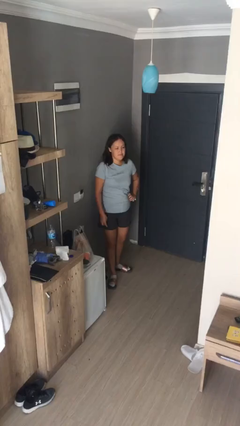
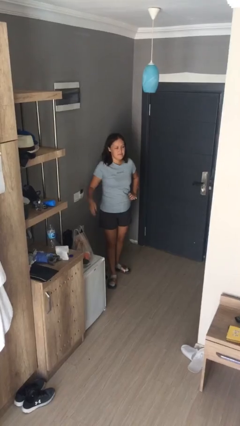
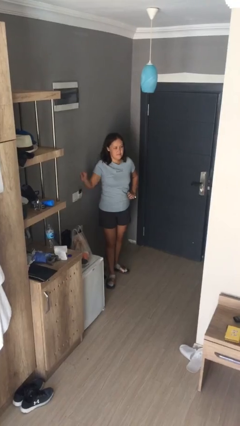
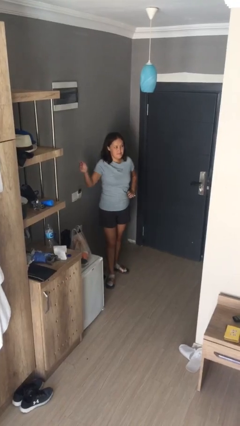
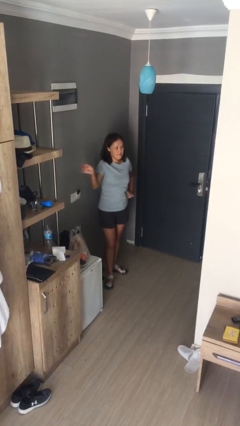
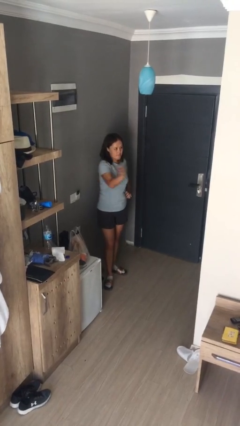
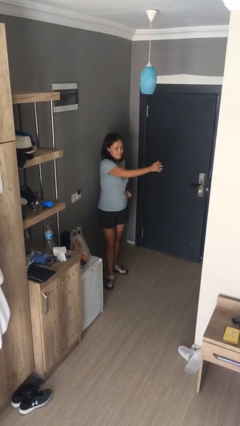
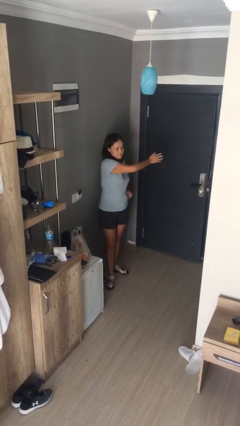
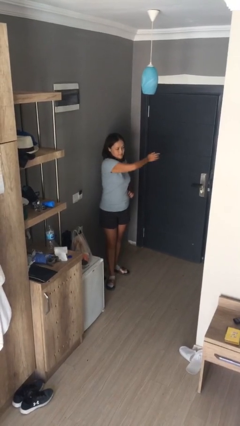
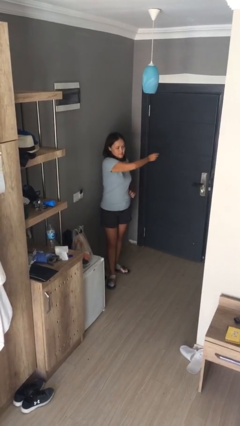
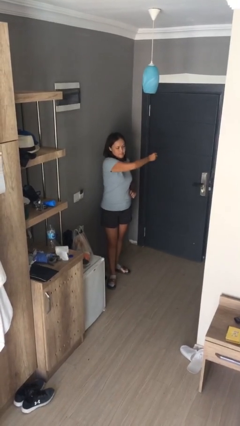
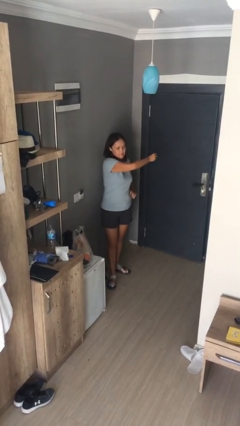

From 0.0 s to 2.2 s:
person gestures swipe left

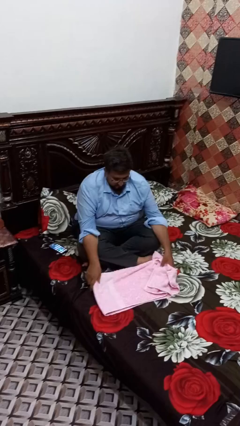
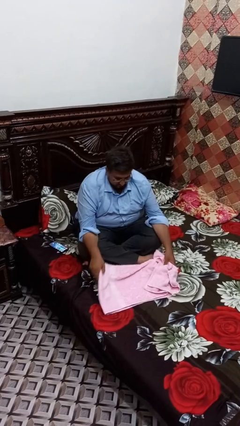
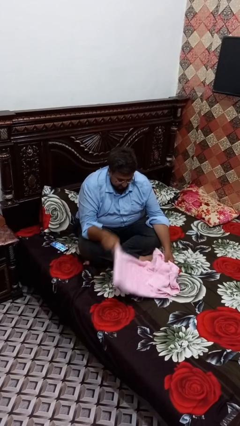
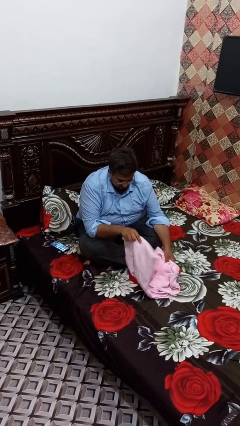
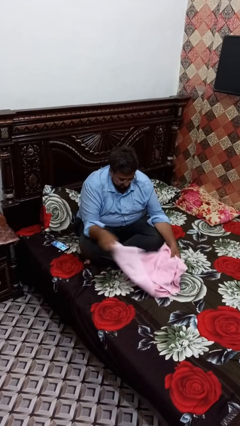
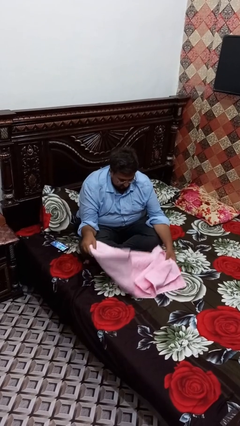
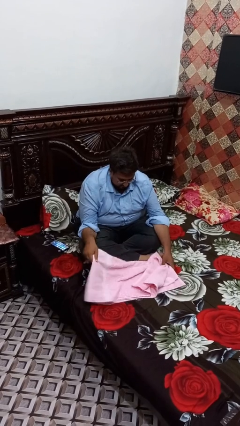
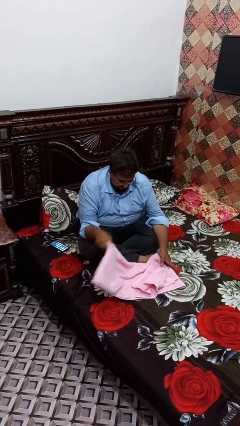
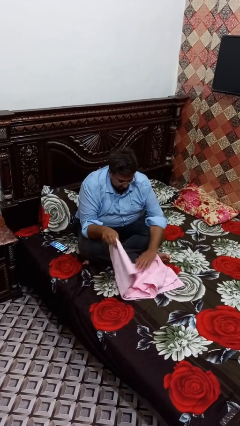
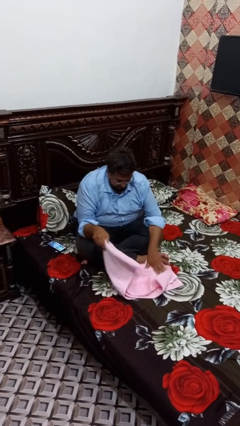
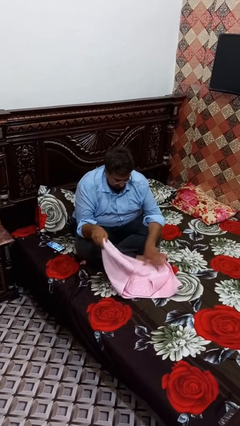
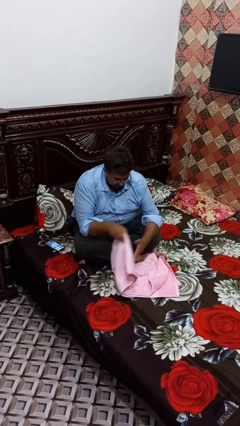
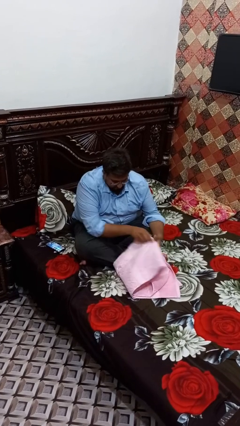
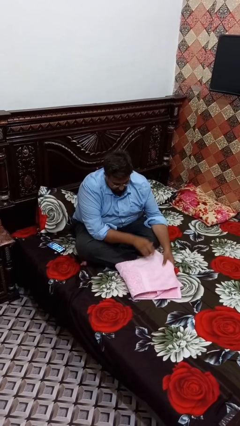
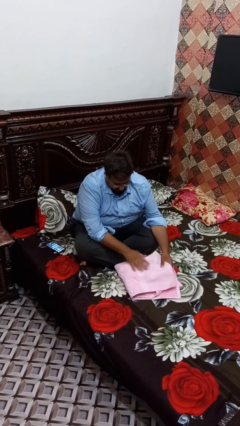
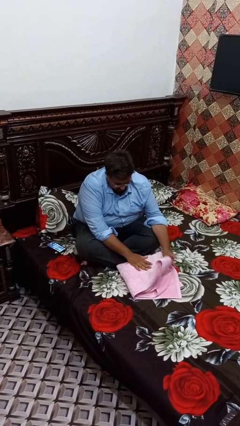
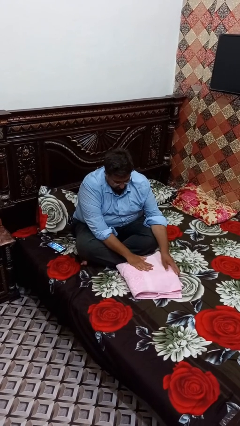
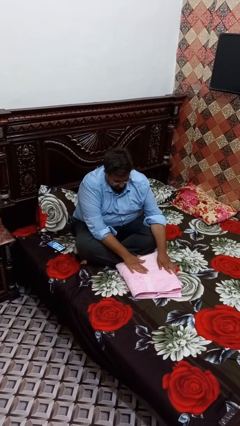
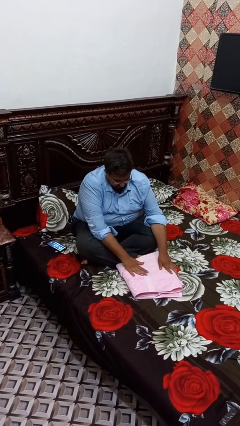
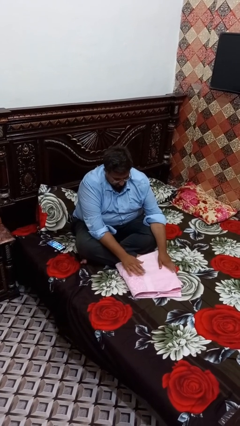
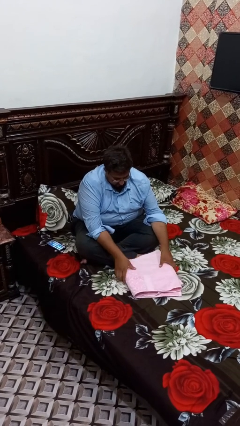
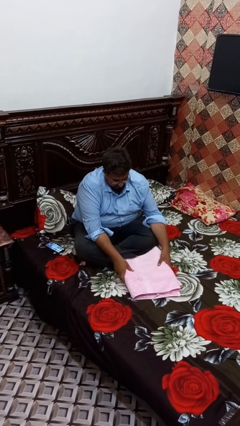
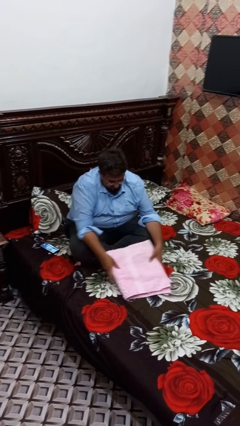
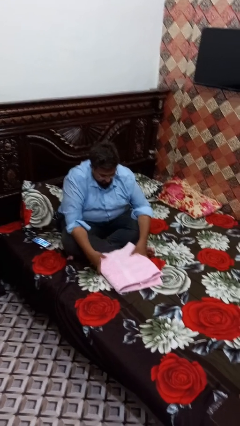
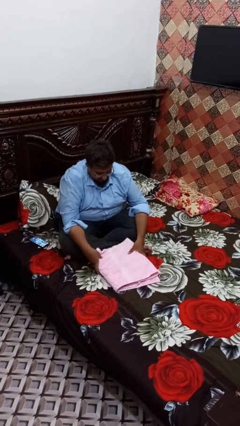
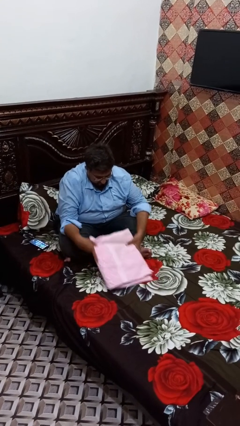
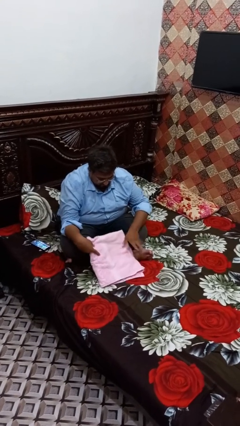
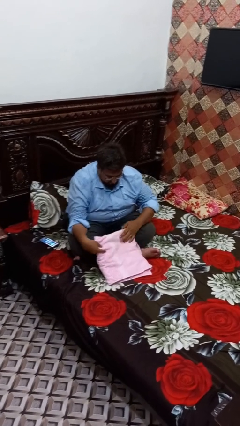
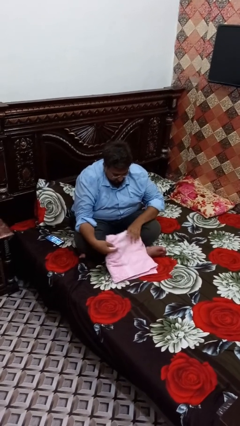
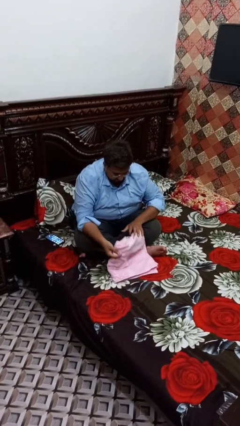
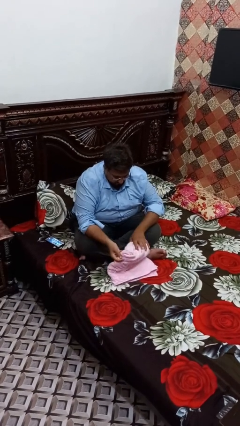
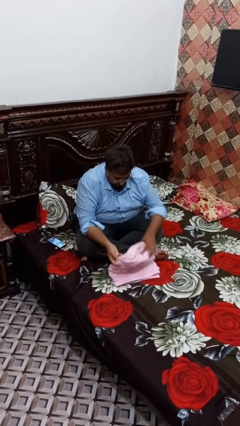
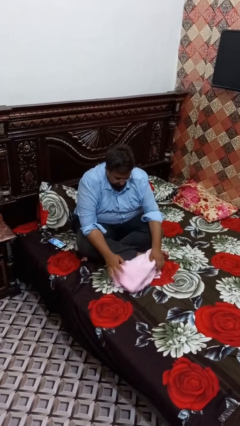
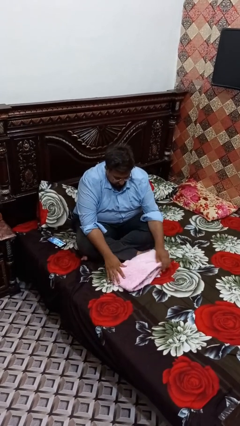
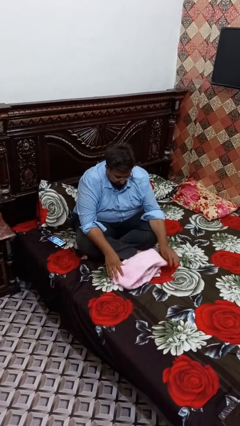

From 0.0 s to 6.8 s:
person folds towel

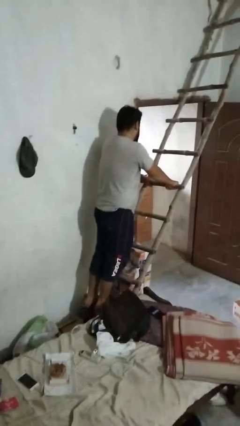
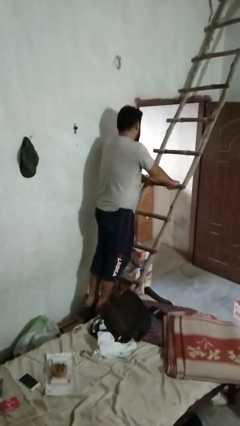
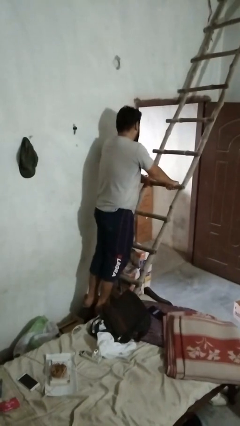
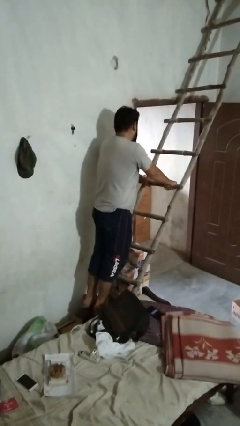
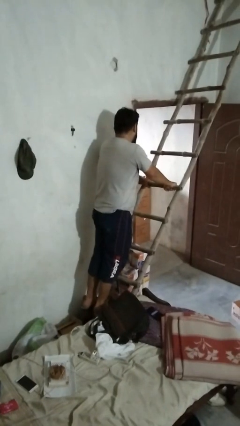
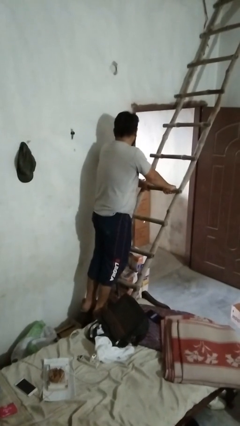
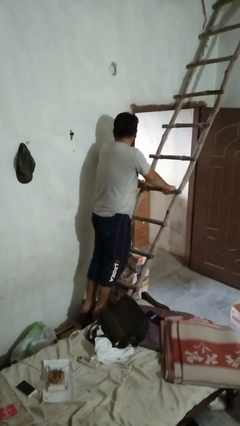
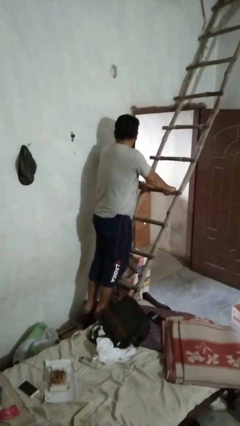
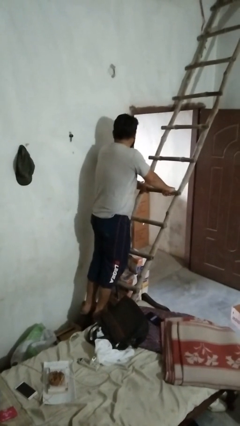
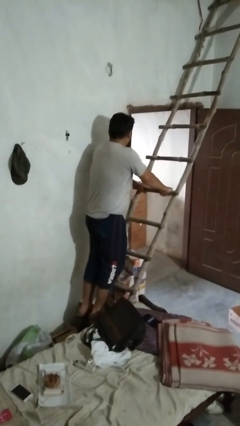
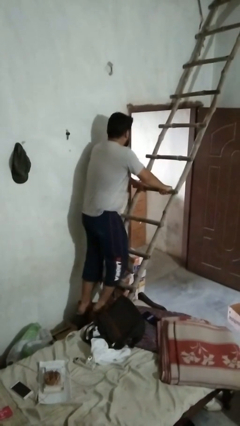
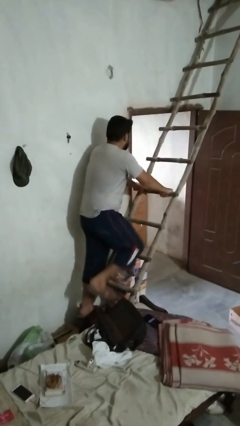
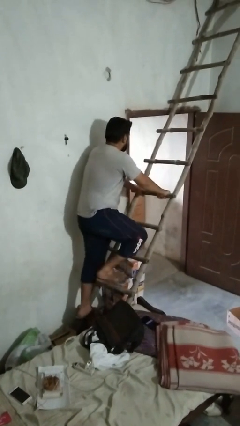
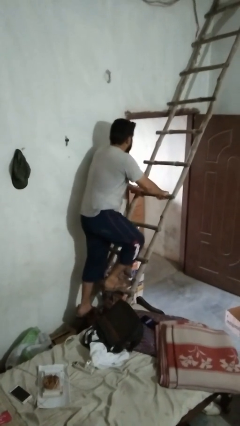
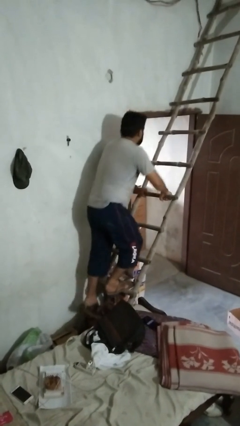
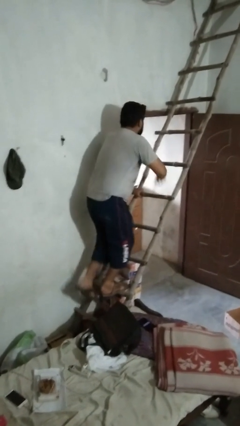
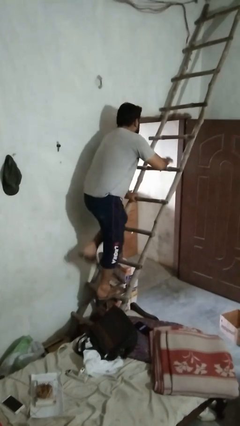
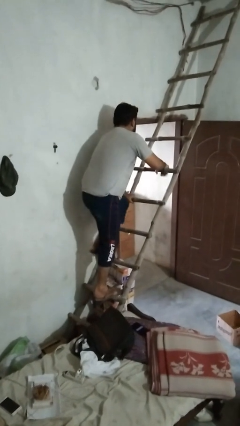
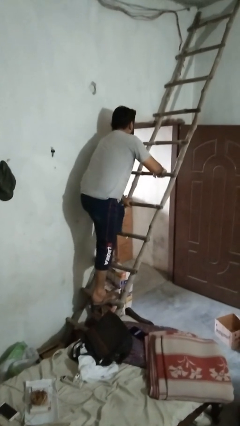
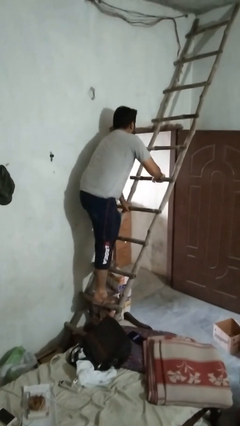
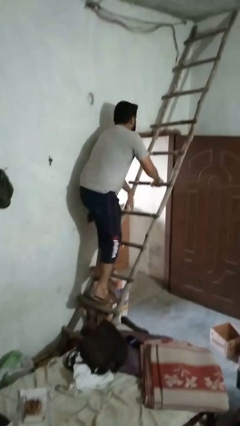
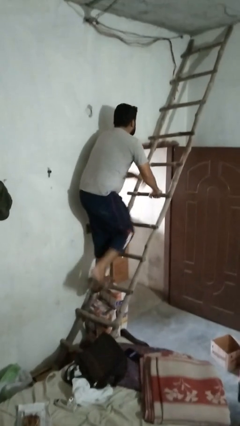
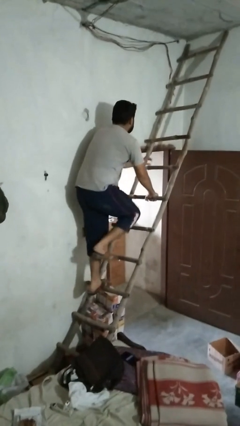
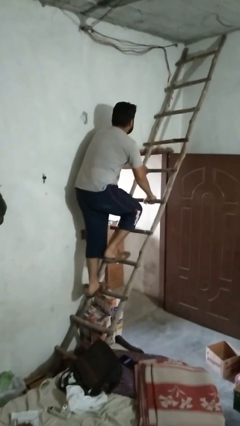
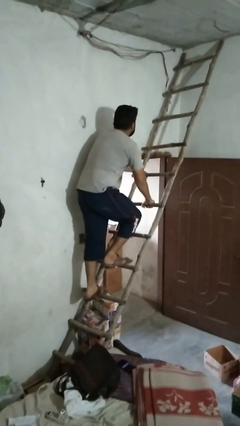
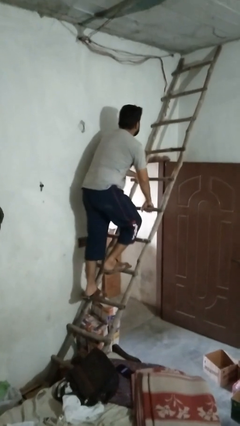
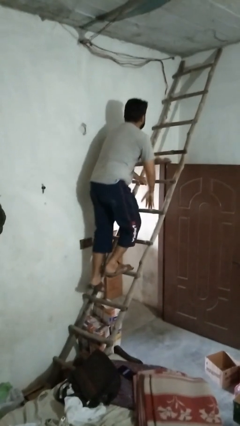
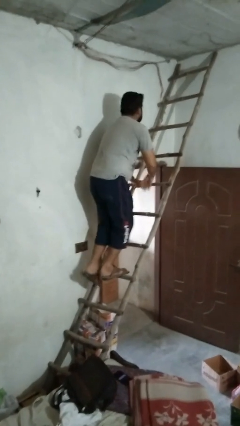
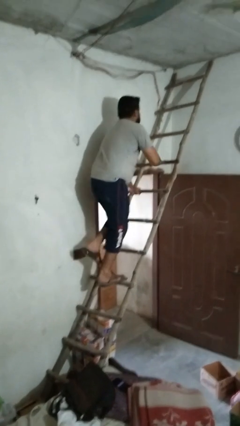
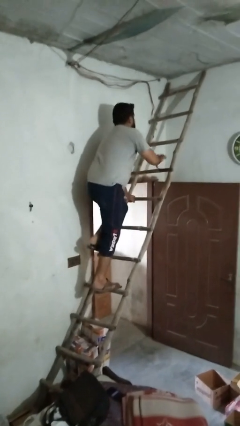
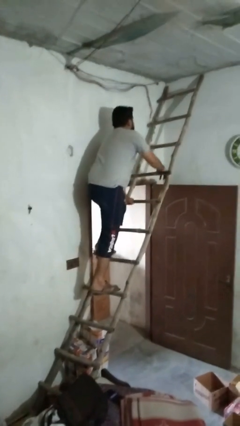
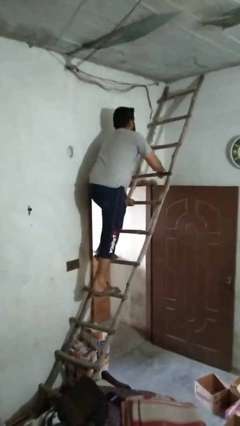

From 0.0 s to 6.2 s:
person climbs up ladder

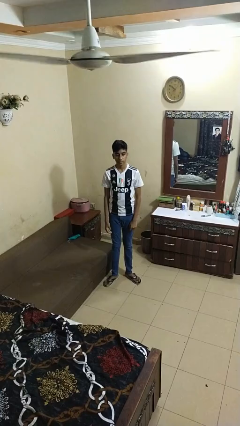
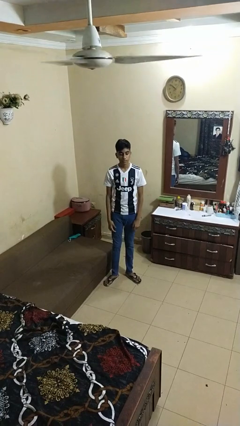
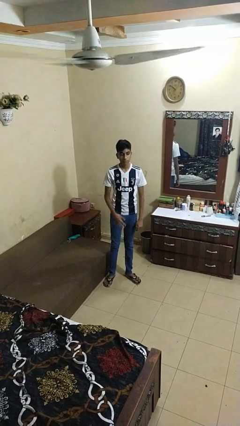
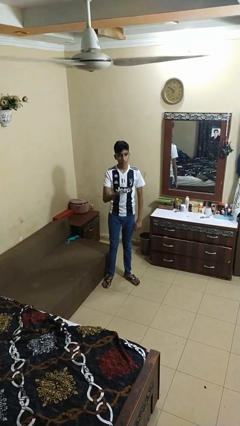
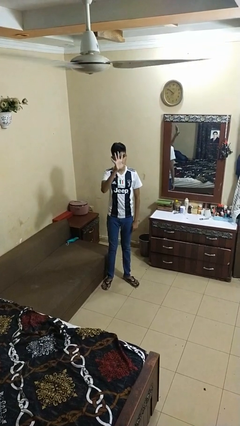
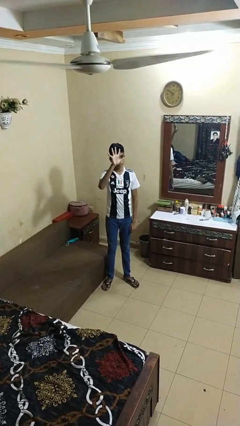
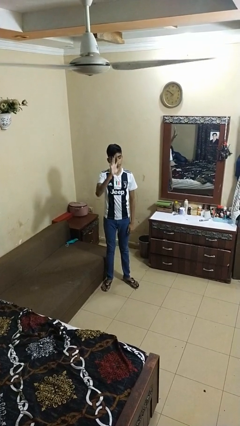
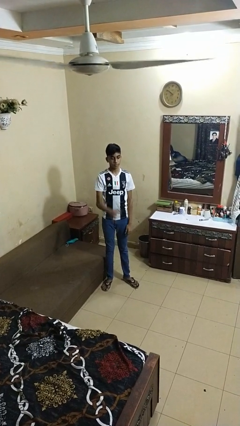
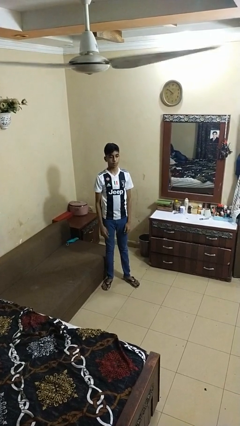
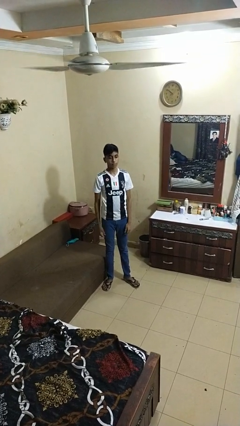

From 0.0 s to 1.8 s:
person gestures number five

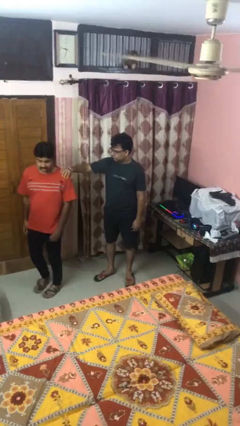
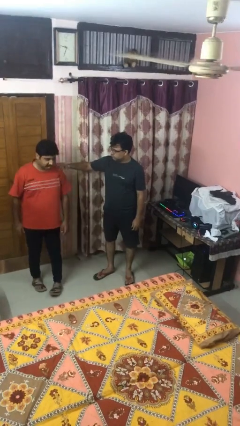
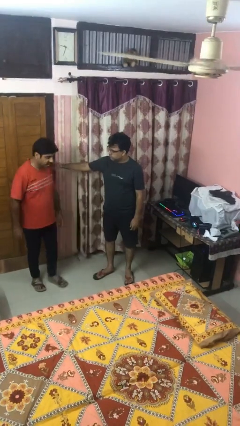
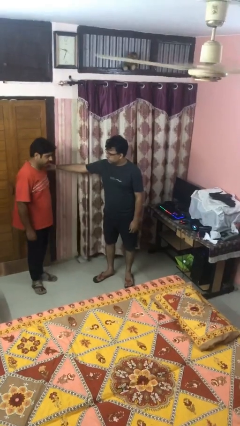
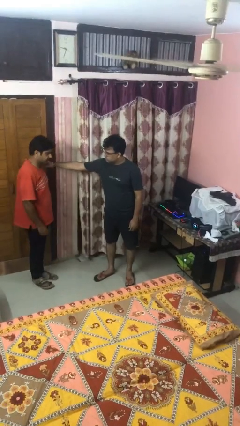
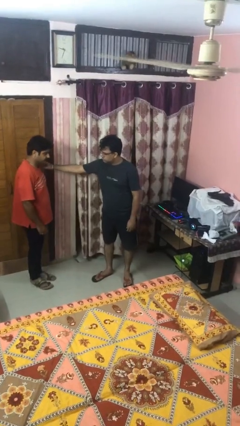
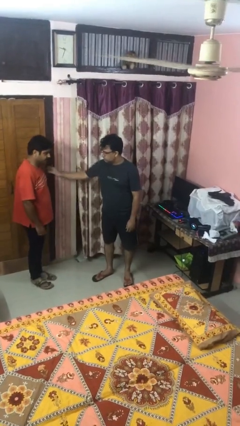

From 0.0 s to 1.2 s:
person spins person around
